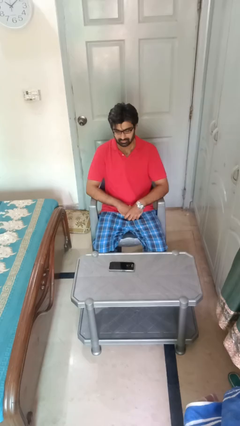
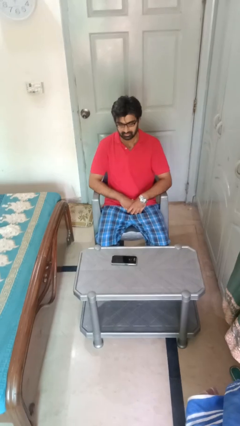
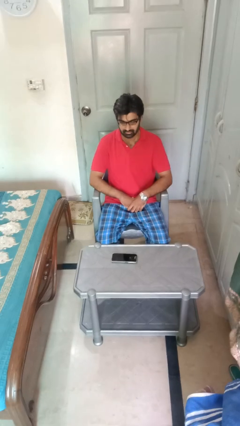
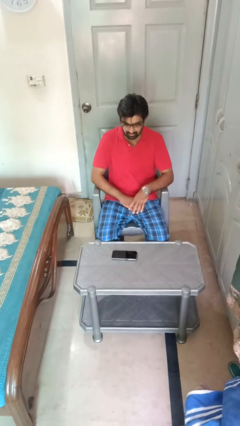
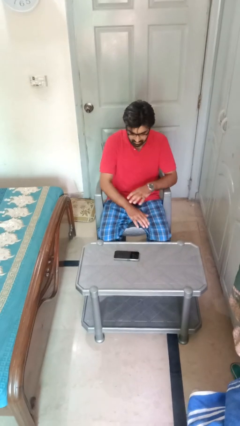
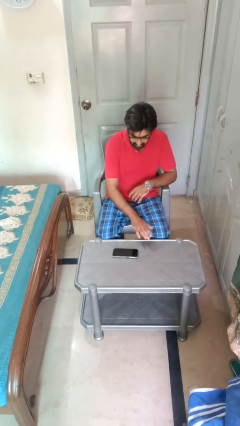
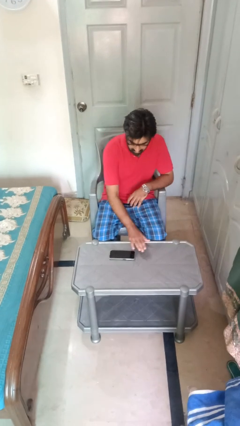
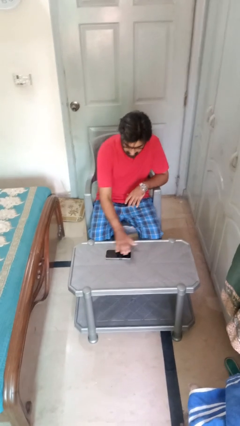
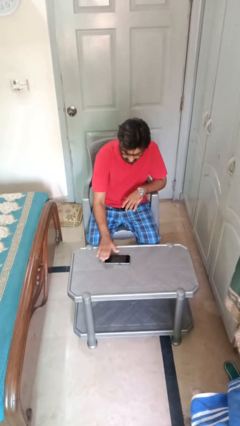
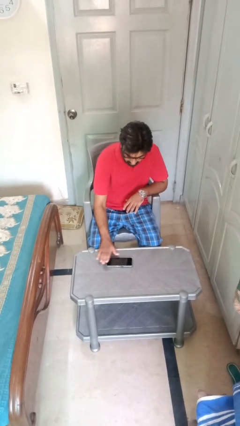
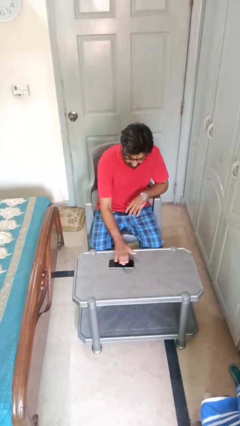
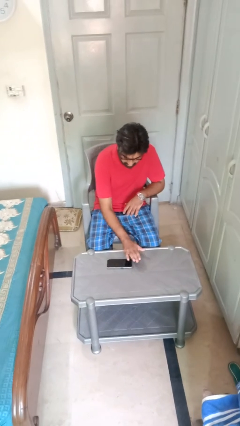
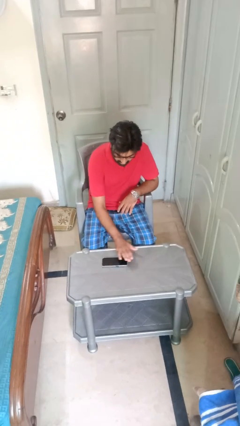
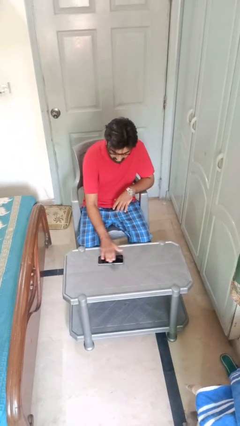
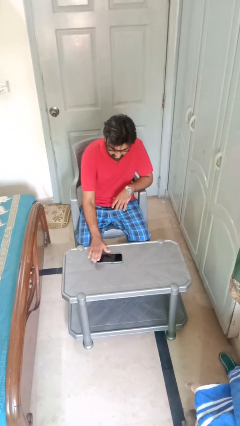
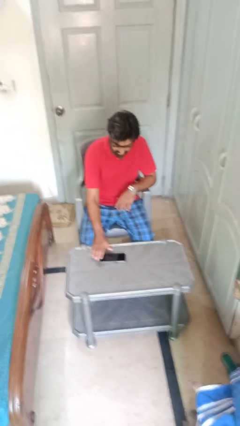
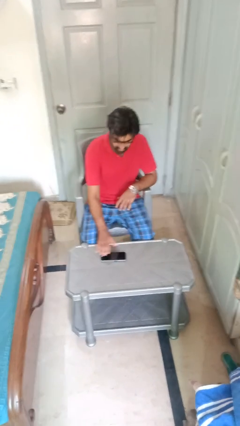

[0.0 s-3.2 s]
person waves hand over object

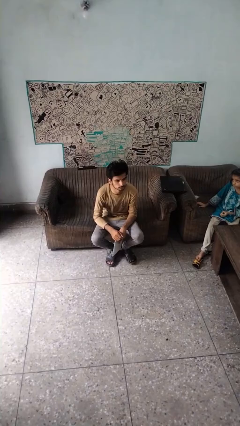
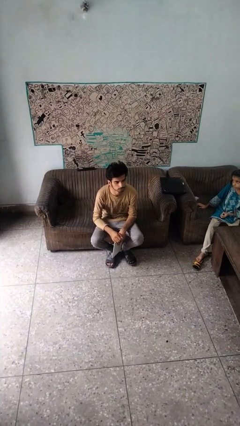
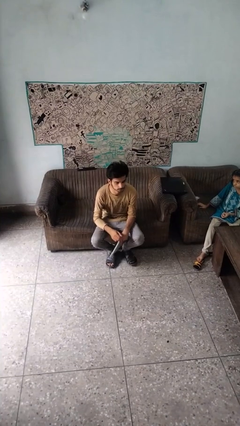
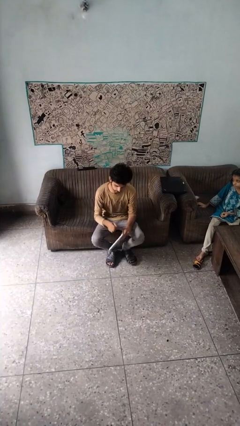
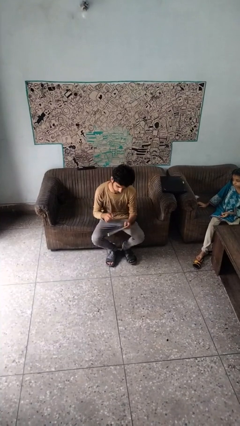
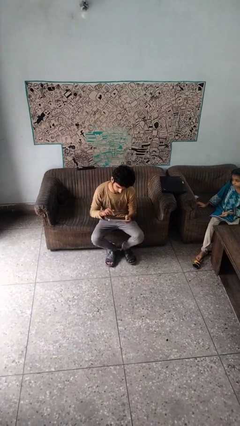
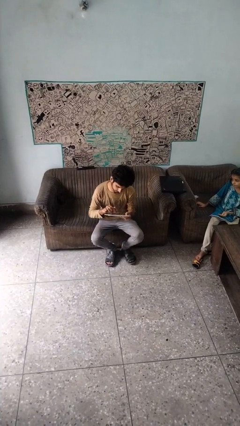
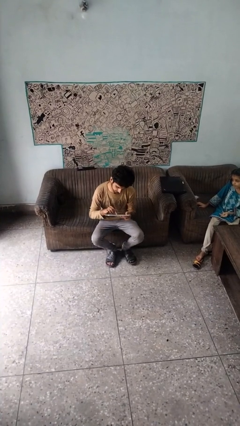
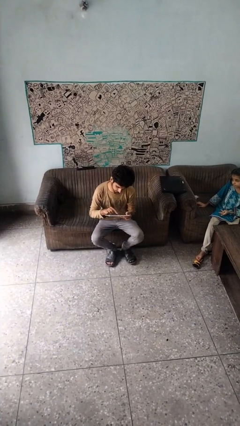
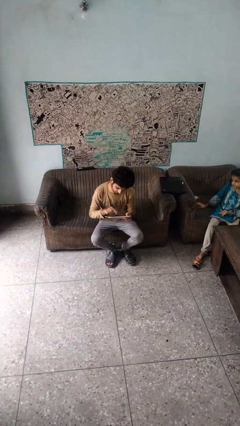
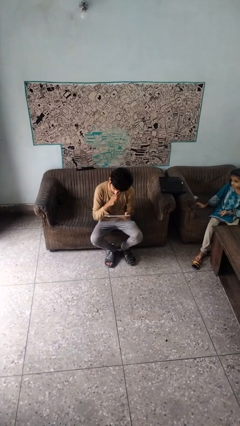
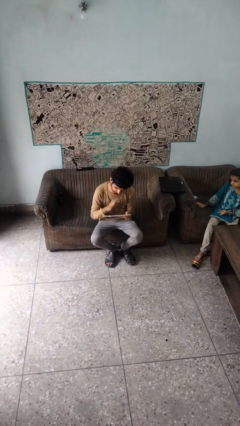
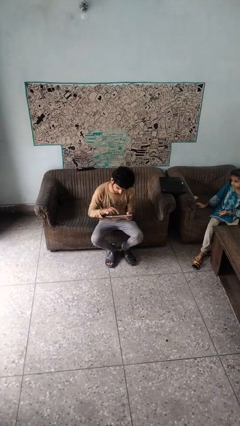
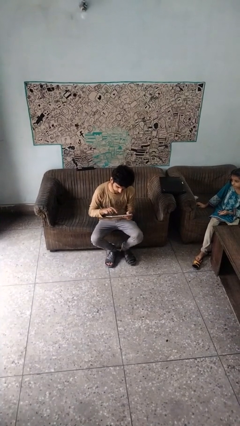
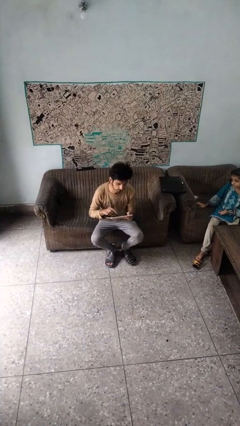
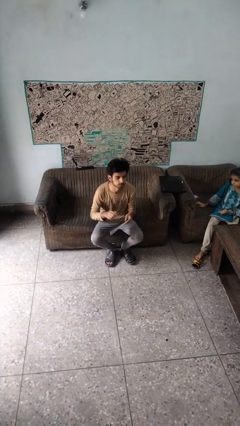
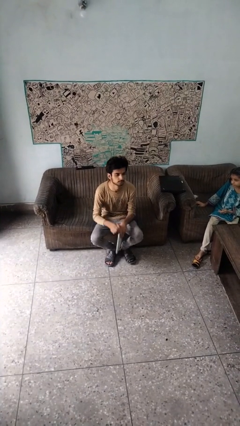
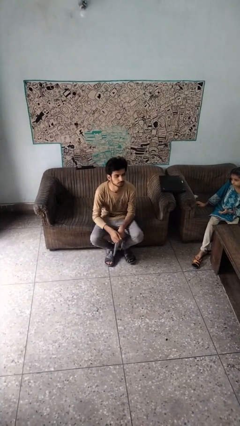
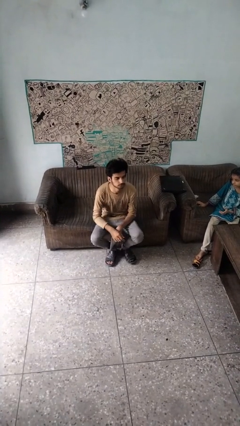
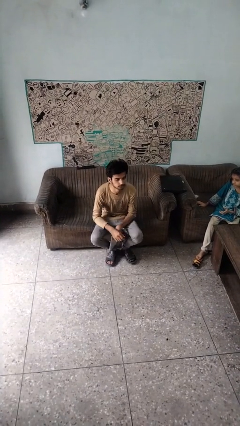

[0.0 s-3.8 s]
person interacts with tablet

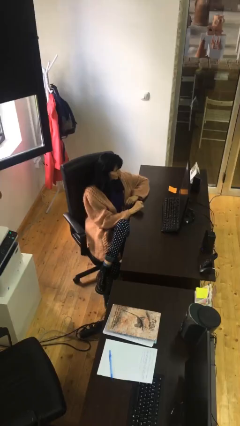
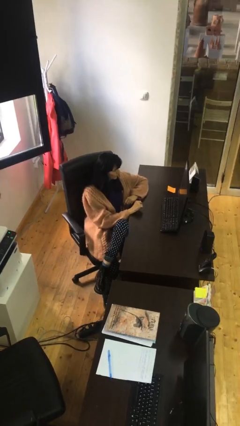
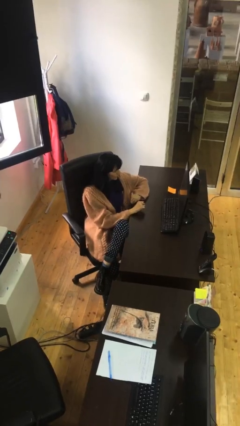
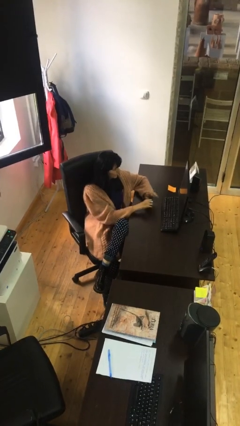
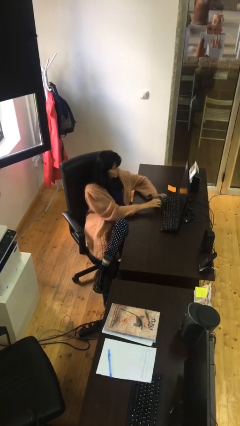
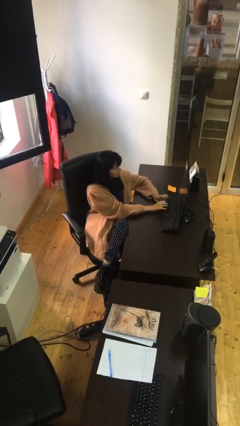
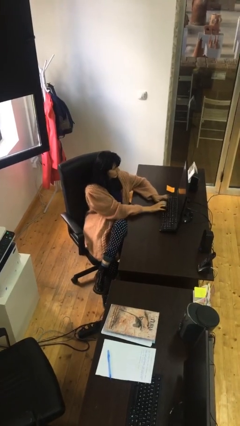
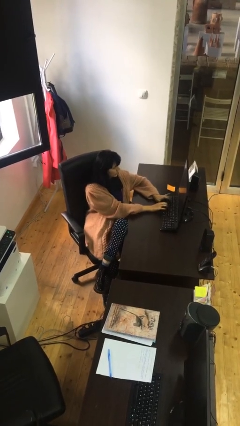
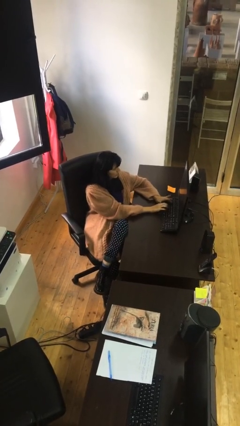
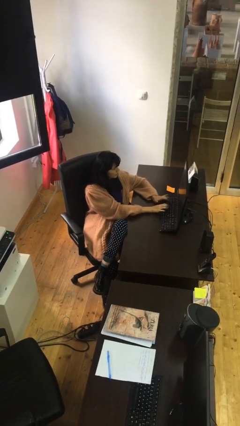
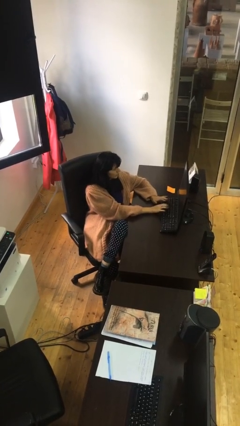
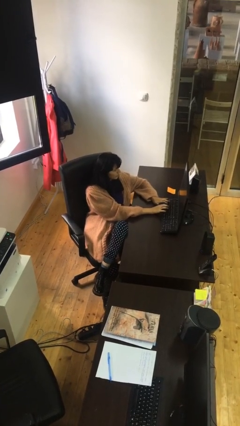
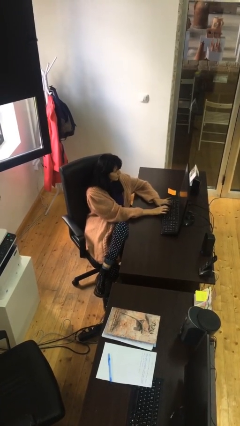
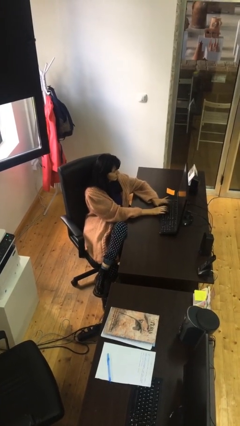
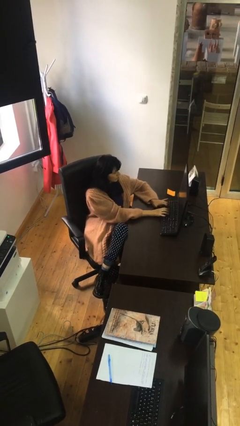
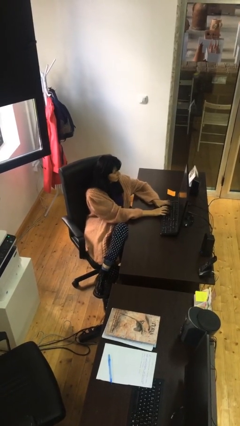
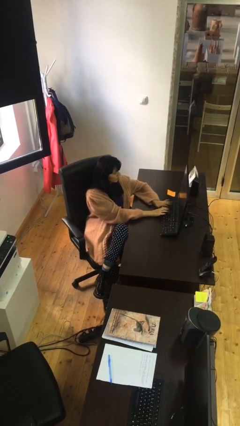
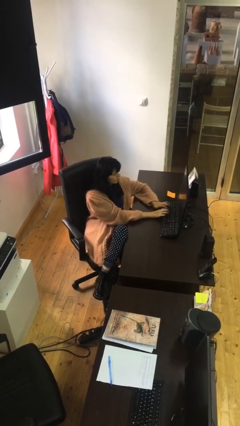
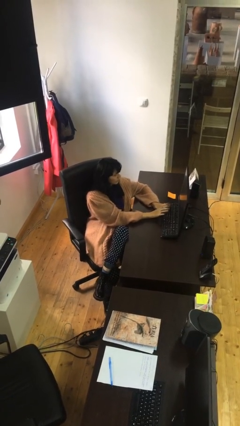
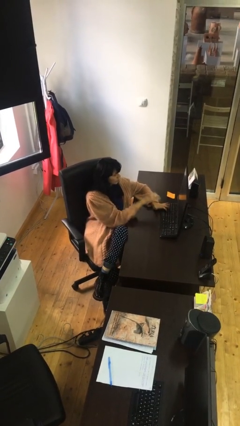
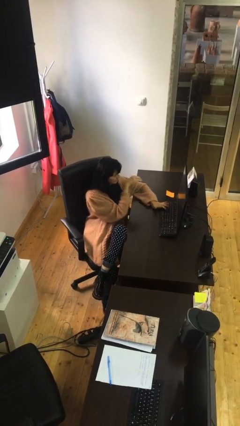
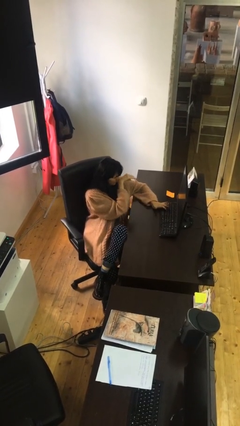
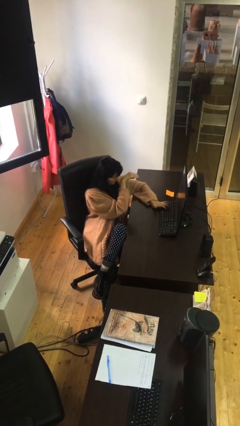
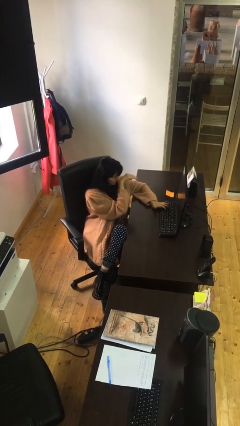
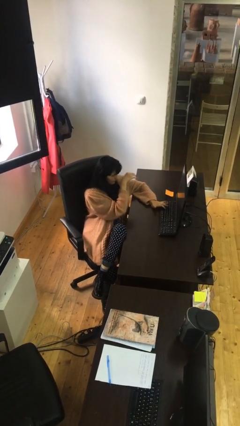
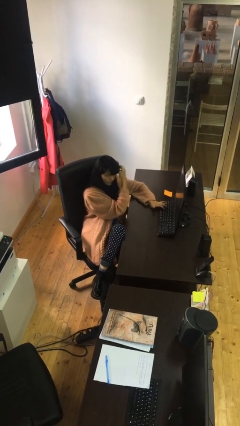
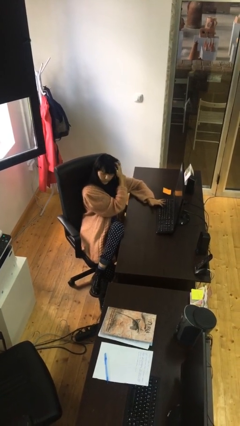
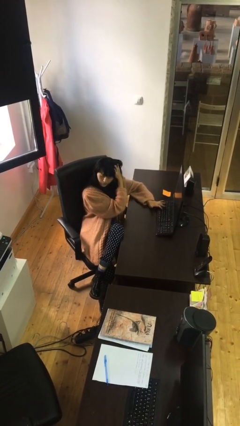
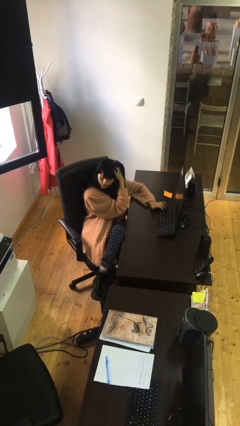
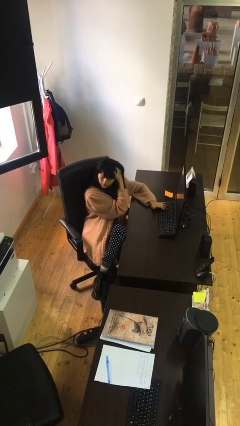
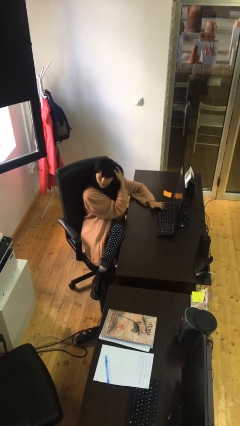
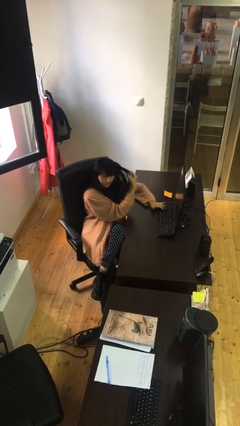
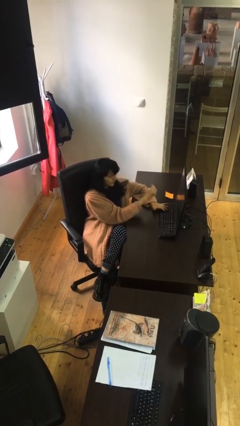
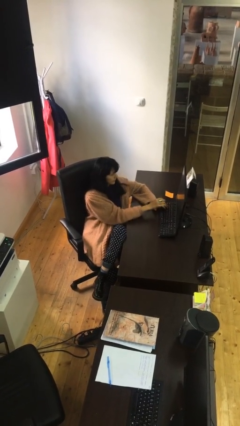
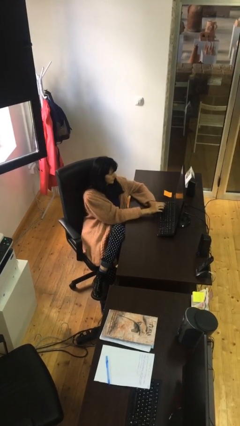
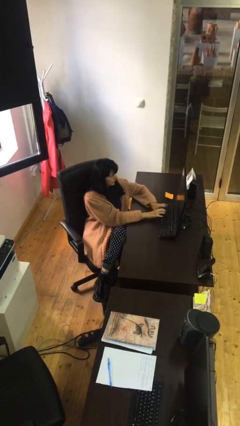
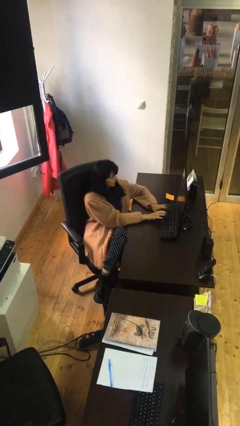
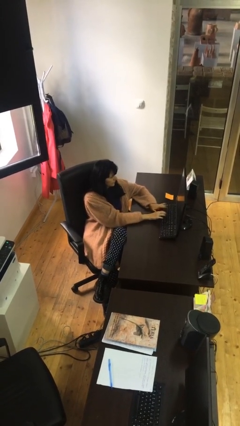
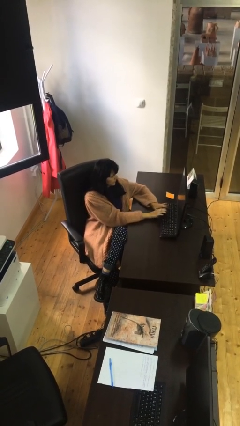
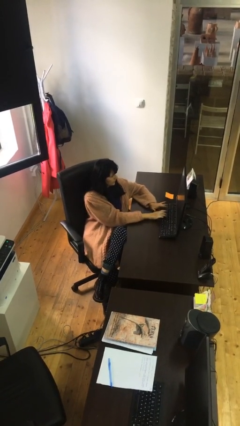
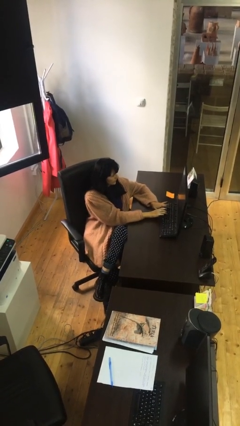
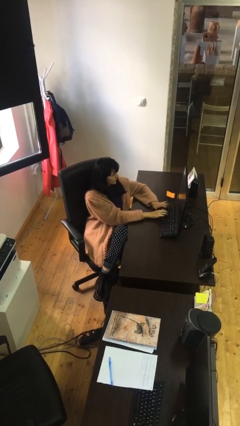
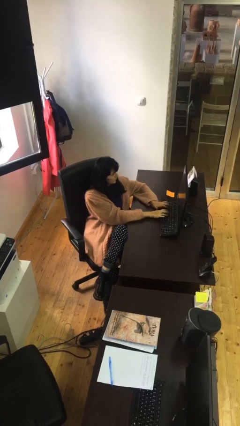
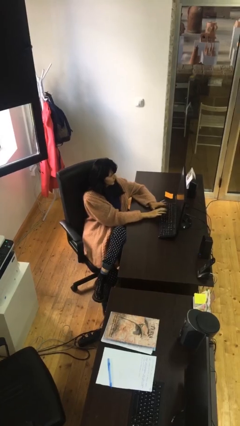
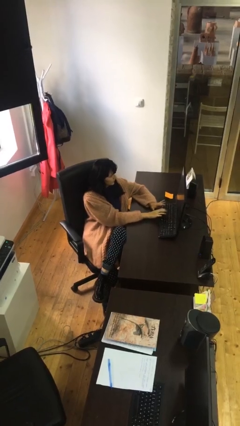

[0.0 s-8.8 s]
person interacts with laptop

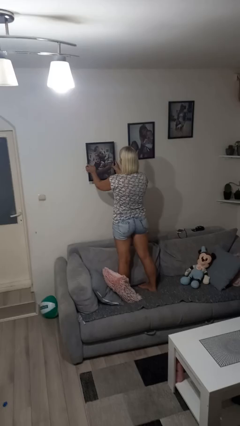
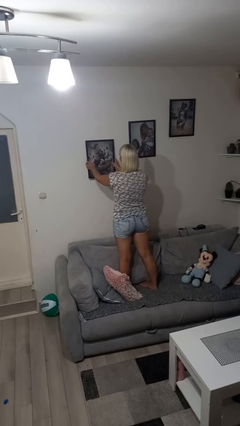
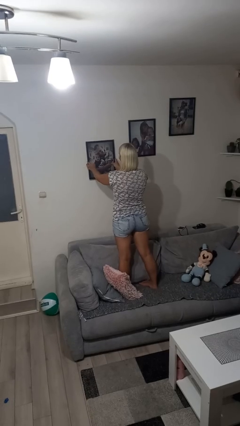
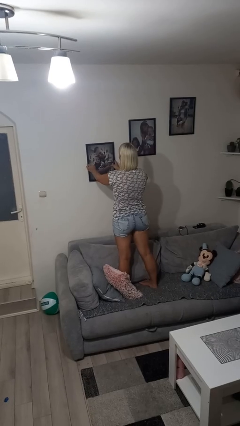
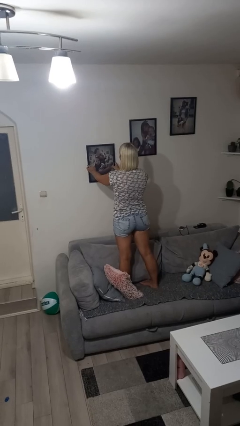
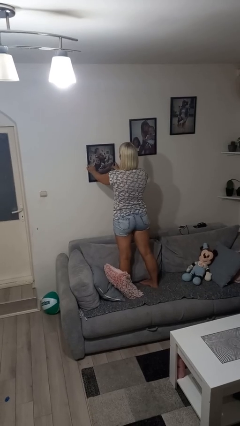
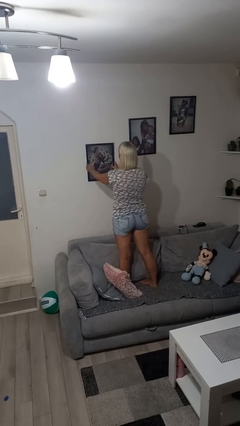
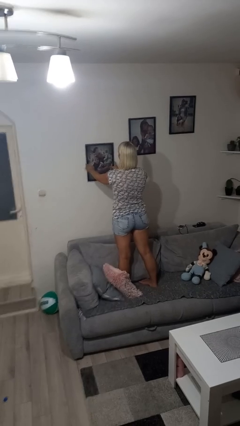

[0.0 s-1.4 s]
person puts up picture frame

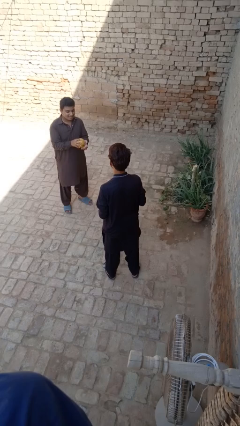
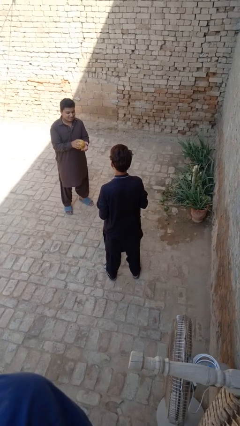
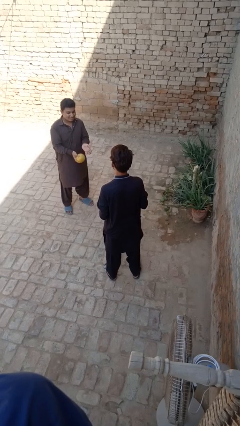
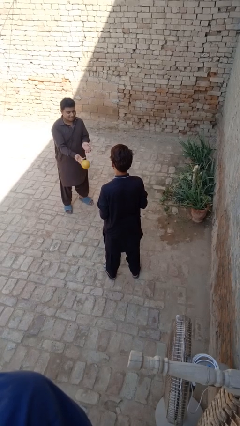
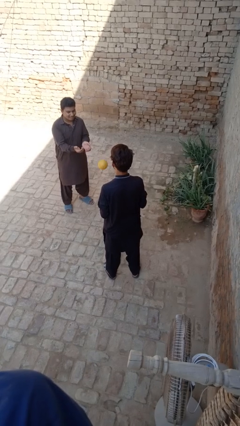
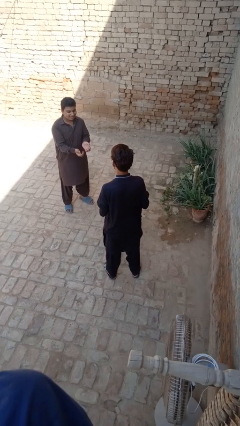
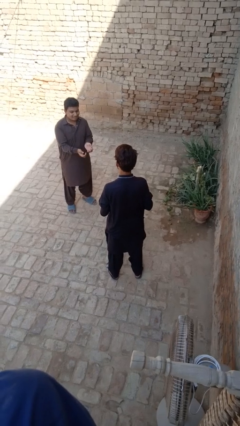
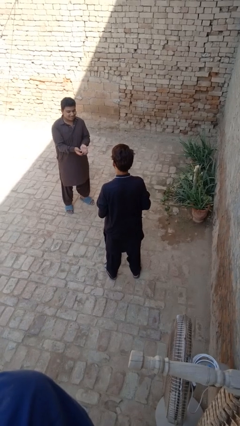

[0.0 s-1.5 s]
person catches object from person
